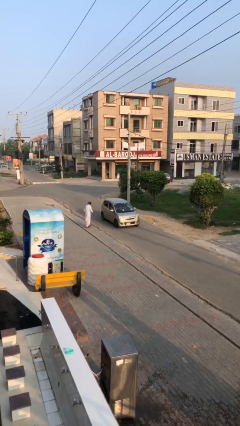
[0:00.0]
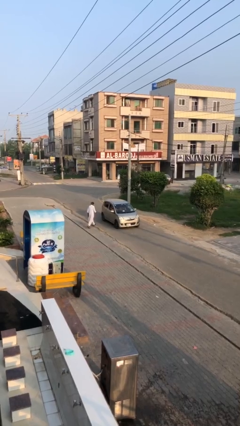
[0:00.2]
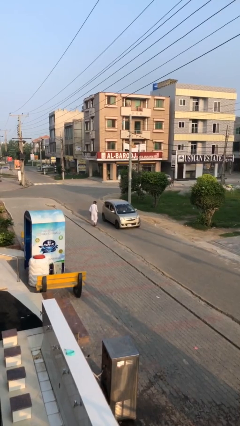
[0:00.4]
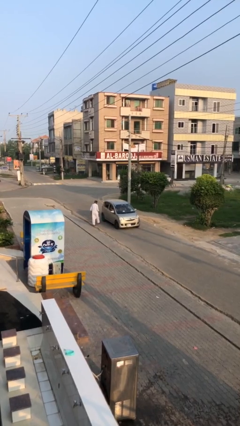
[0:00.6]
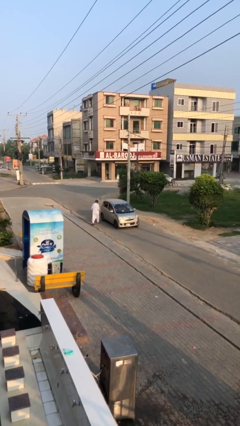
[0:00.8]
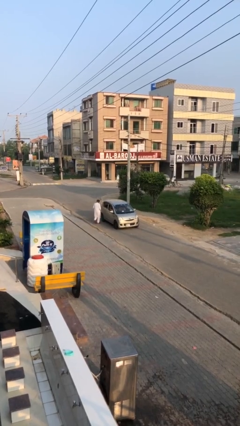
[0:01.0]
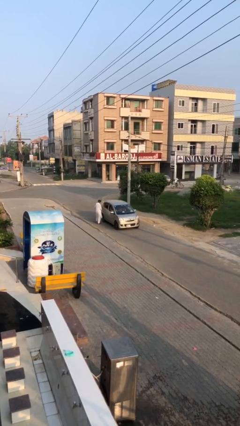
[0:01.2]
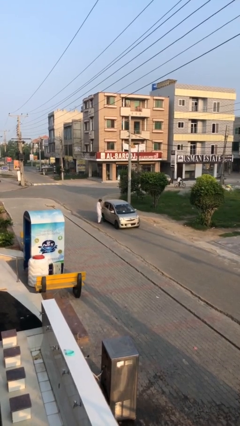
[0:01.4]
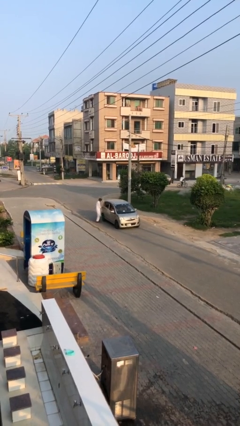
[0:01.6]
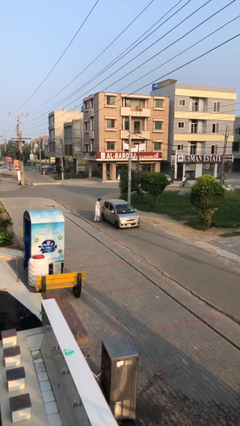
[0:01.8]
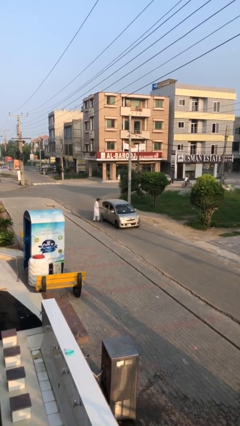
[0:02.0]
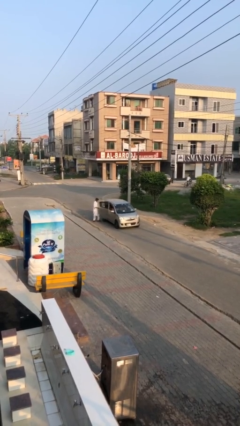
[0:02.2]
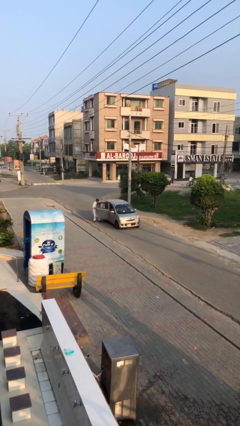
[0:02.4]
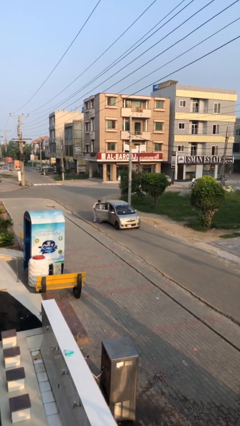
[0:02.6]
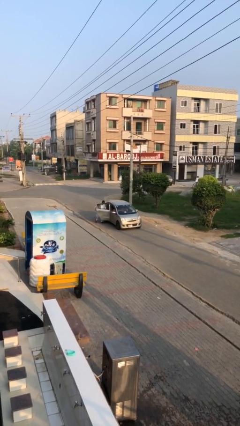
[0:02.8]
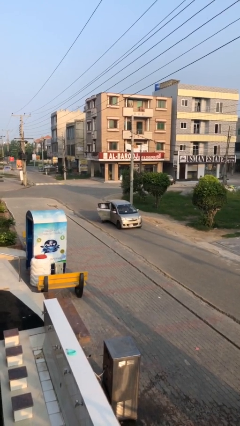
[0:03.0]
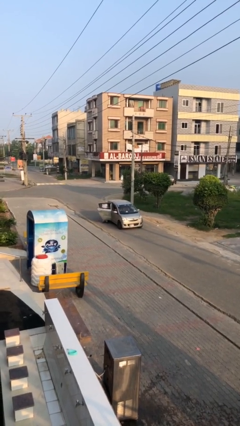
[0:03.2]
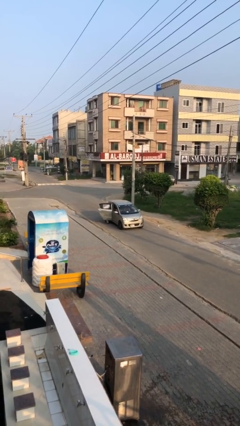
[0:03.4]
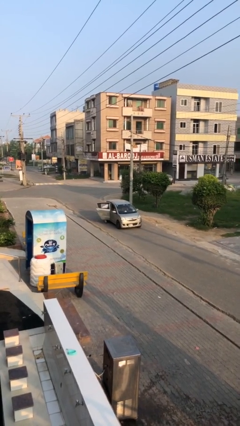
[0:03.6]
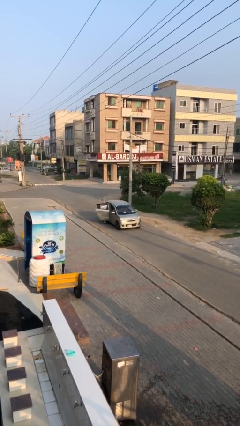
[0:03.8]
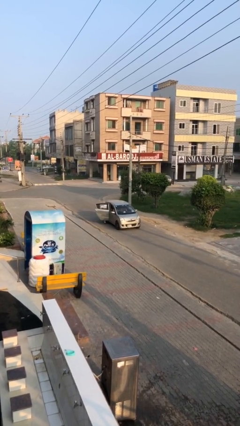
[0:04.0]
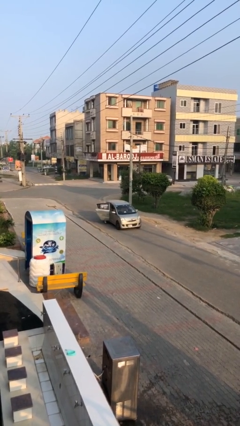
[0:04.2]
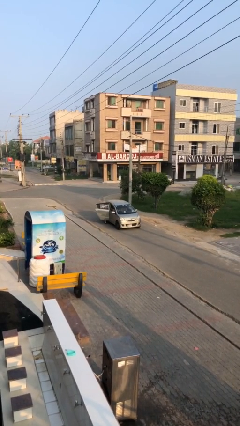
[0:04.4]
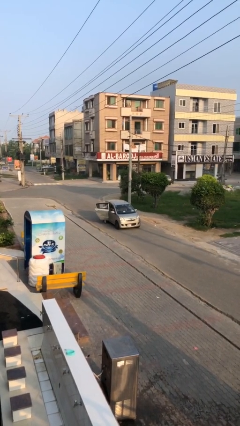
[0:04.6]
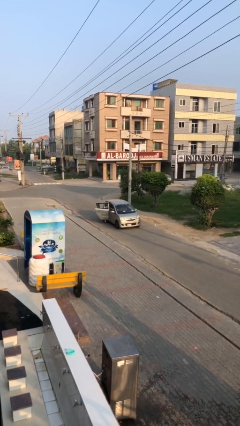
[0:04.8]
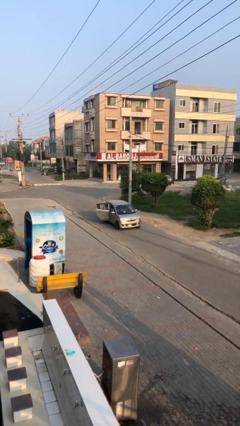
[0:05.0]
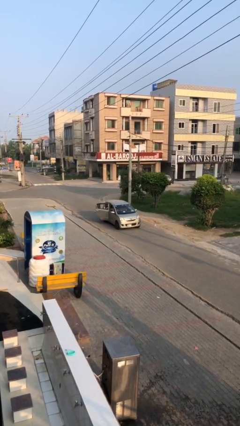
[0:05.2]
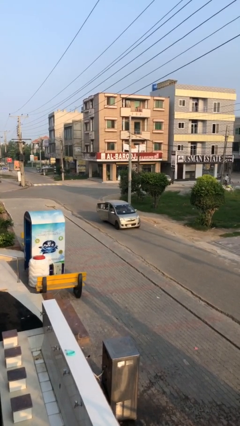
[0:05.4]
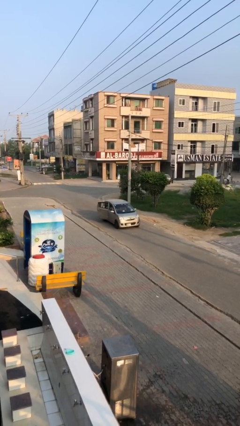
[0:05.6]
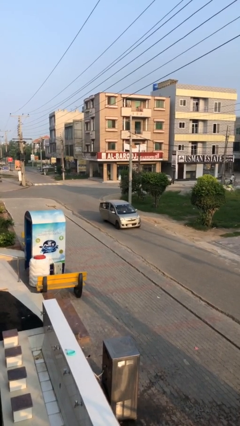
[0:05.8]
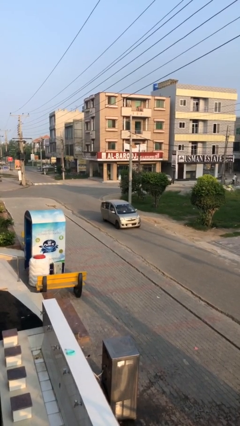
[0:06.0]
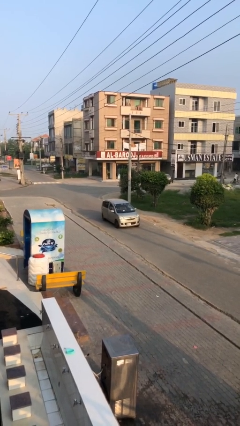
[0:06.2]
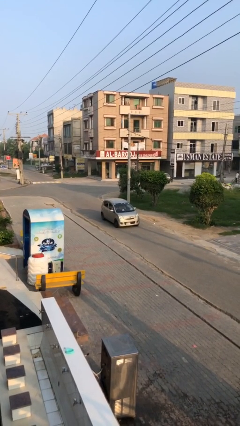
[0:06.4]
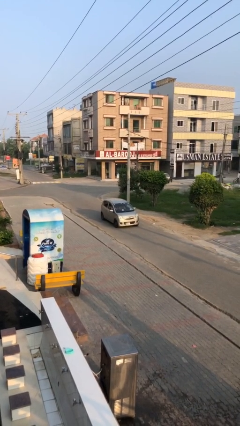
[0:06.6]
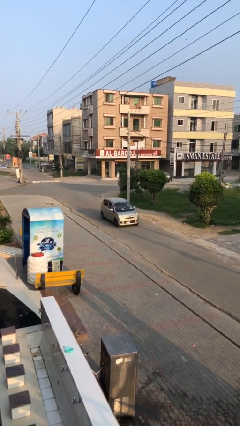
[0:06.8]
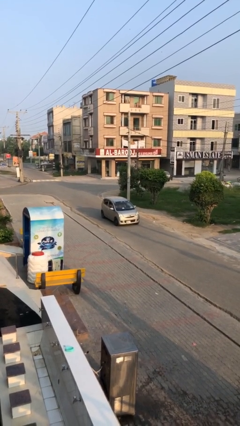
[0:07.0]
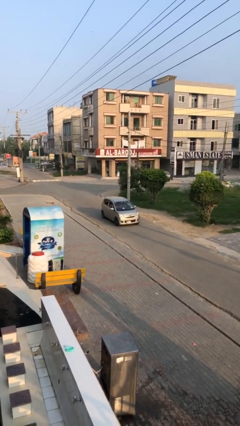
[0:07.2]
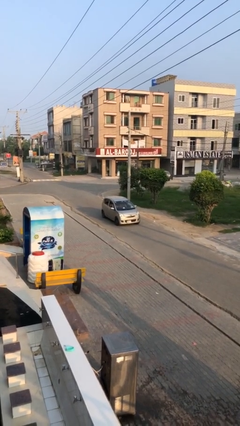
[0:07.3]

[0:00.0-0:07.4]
car picks up person

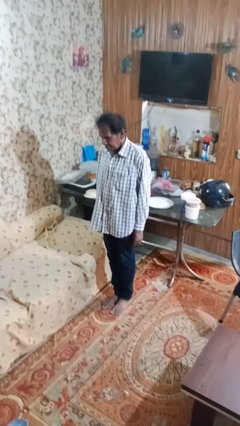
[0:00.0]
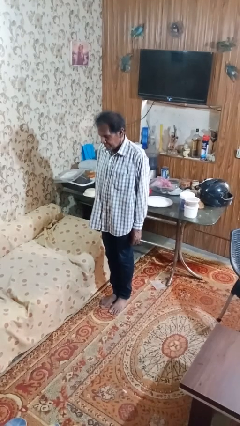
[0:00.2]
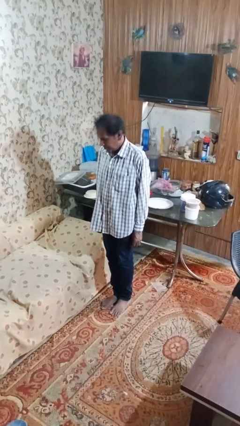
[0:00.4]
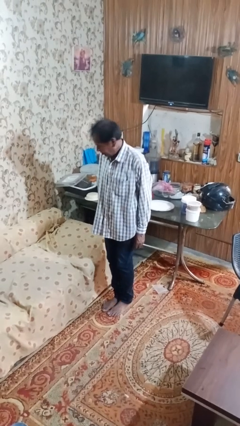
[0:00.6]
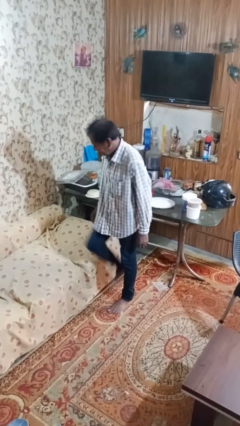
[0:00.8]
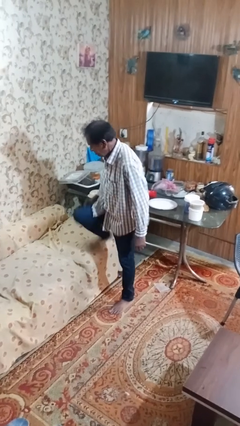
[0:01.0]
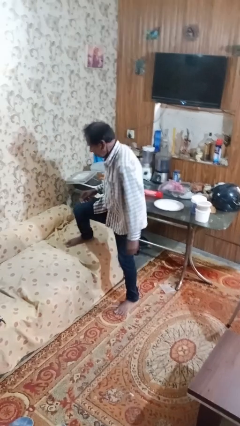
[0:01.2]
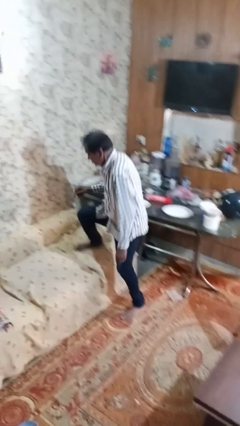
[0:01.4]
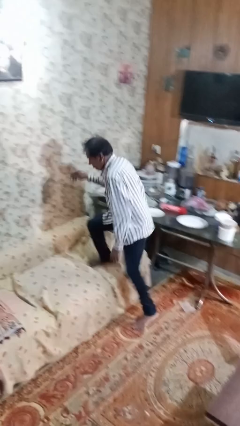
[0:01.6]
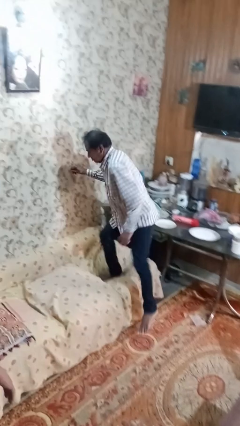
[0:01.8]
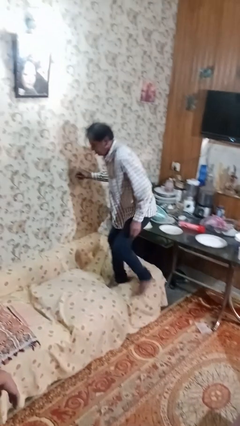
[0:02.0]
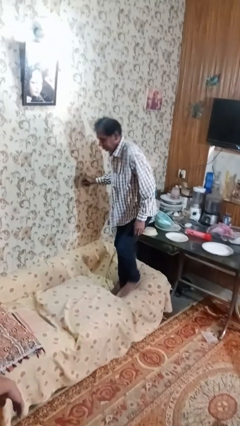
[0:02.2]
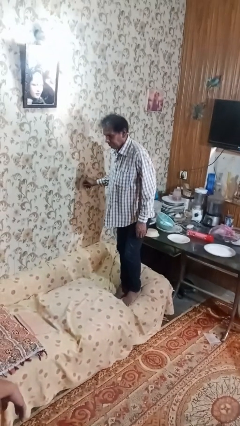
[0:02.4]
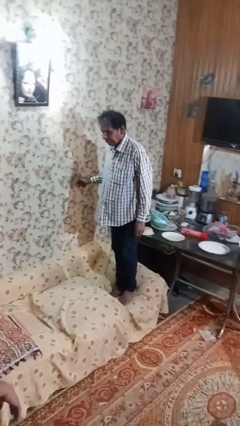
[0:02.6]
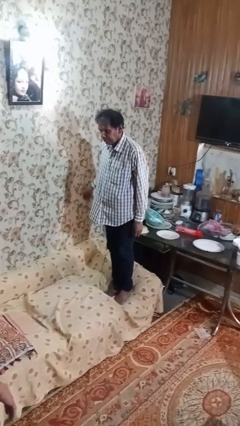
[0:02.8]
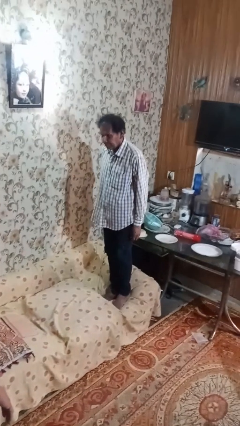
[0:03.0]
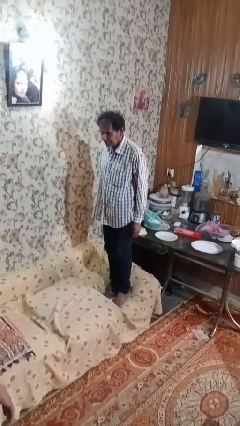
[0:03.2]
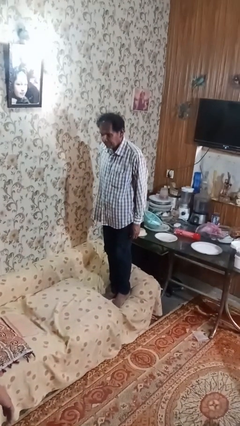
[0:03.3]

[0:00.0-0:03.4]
person climbs on couch

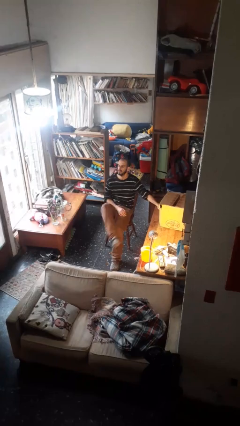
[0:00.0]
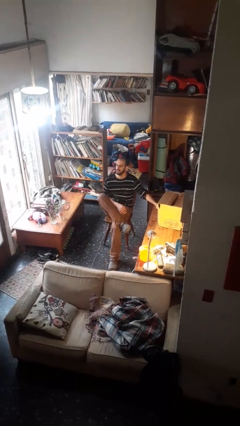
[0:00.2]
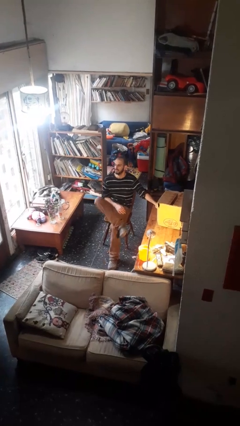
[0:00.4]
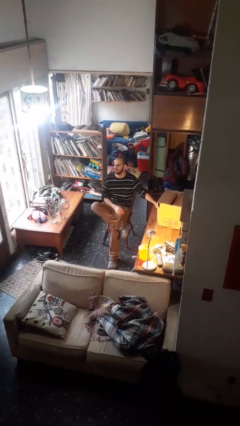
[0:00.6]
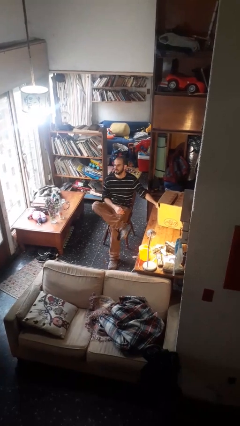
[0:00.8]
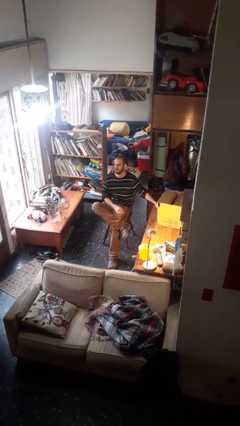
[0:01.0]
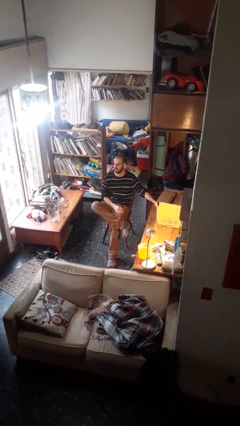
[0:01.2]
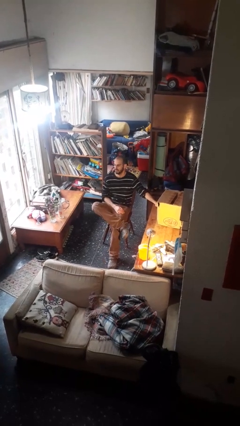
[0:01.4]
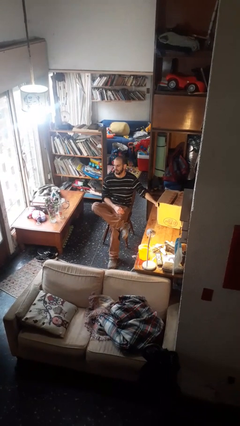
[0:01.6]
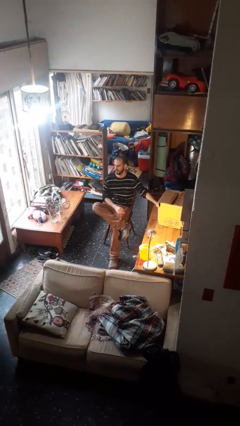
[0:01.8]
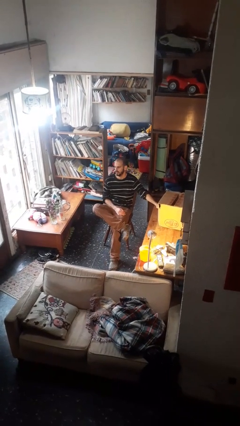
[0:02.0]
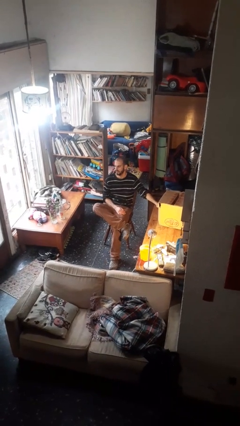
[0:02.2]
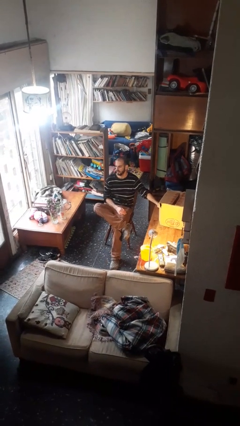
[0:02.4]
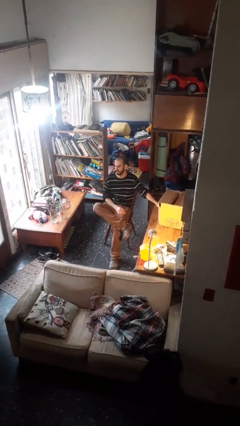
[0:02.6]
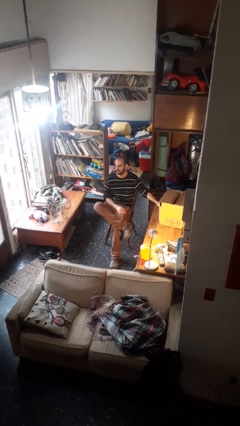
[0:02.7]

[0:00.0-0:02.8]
person crosses legs

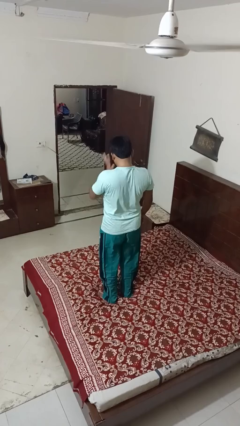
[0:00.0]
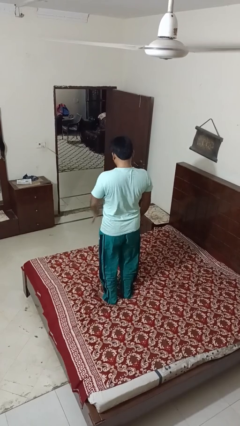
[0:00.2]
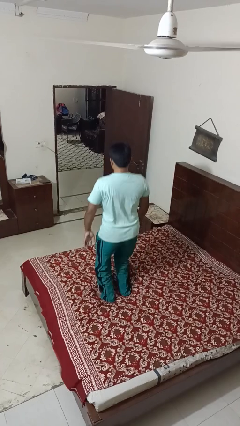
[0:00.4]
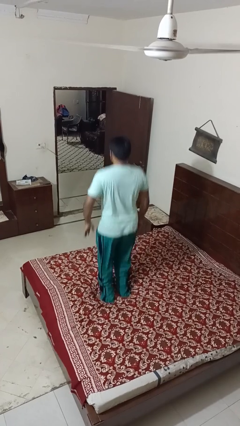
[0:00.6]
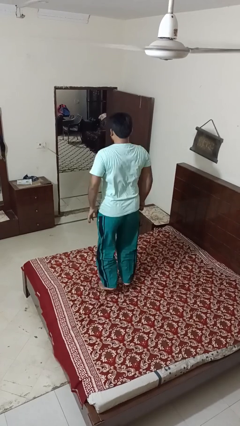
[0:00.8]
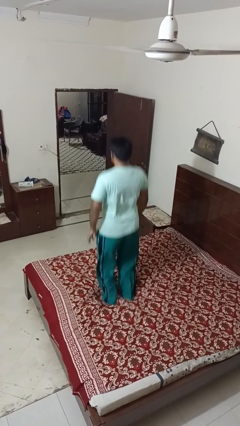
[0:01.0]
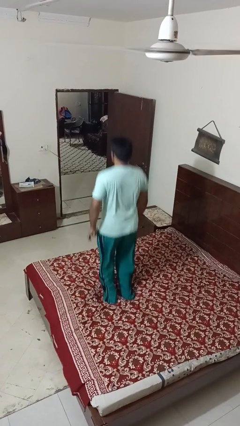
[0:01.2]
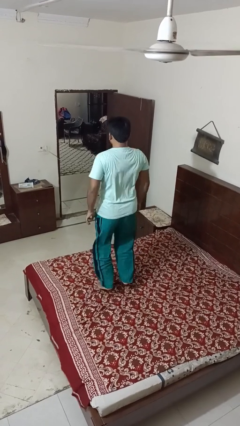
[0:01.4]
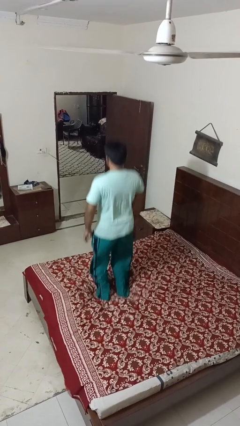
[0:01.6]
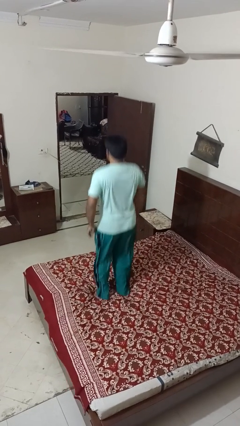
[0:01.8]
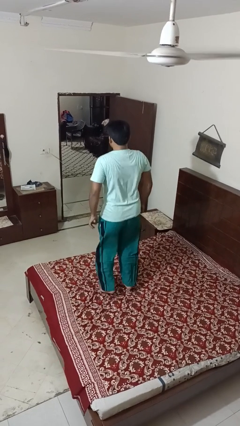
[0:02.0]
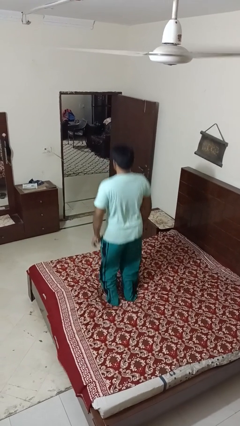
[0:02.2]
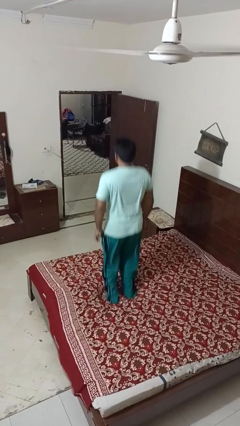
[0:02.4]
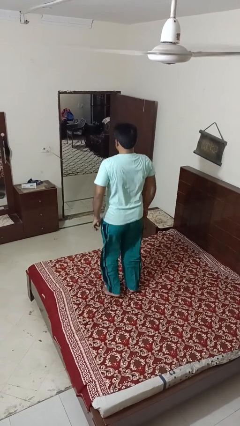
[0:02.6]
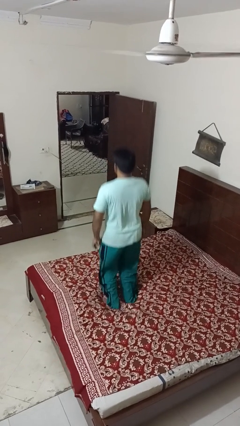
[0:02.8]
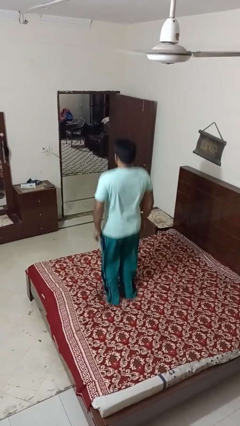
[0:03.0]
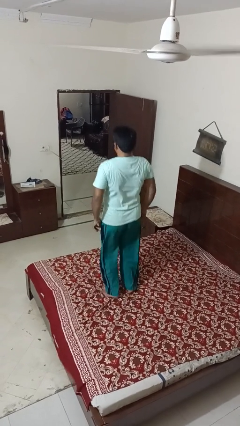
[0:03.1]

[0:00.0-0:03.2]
person jumps on bed

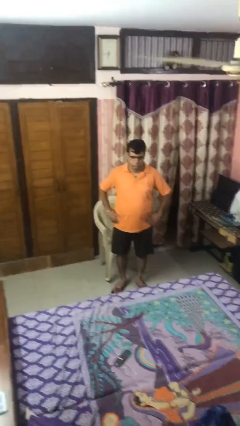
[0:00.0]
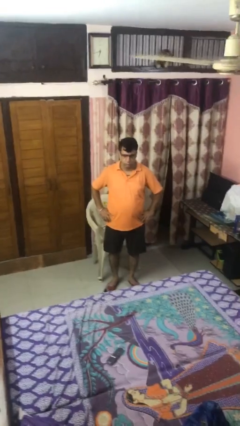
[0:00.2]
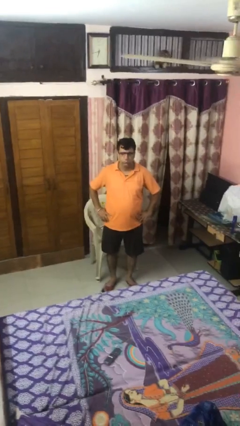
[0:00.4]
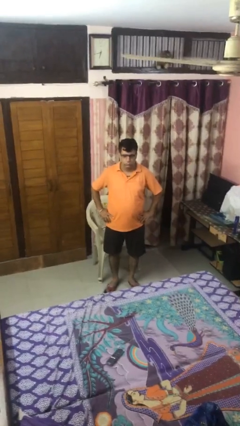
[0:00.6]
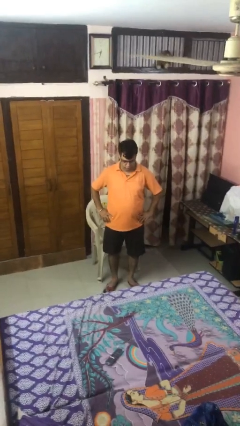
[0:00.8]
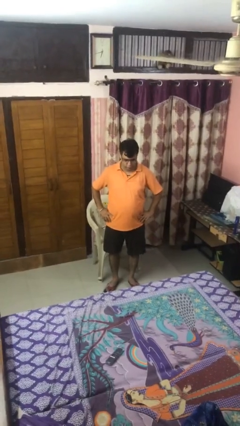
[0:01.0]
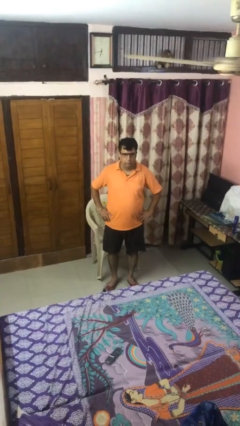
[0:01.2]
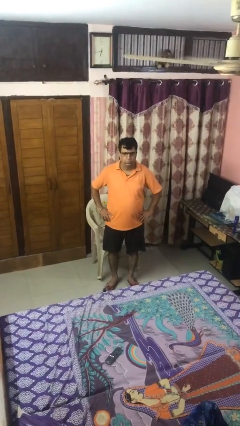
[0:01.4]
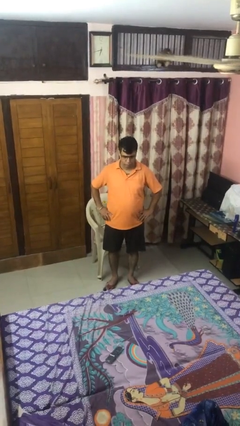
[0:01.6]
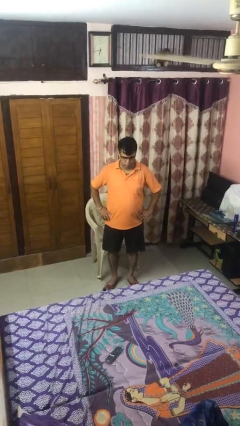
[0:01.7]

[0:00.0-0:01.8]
person nods head
